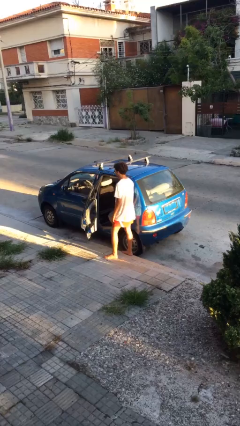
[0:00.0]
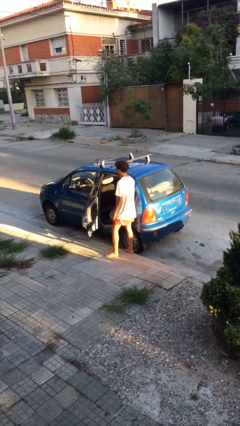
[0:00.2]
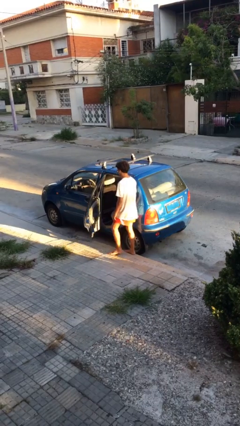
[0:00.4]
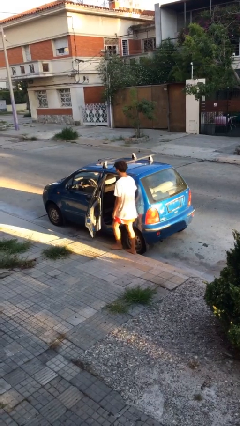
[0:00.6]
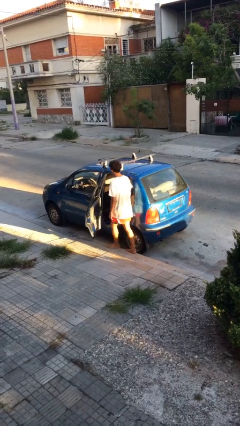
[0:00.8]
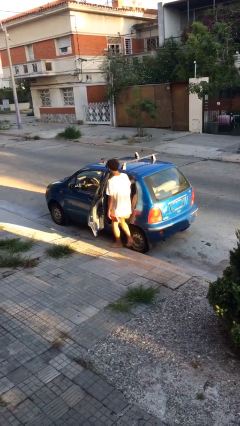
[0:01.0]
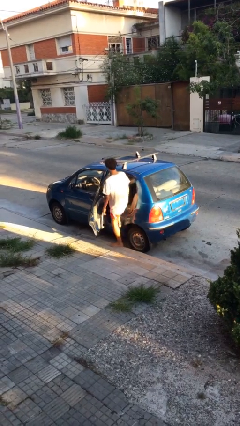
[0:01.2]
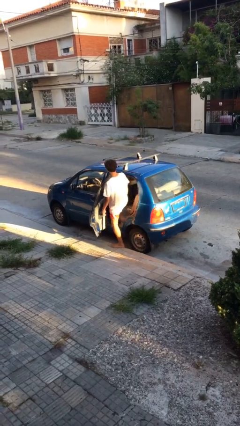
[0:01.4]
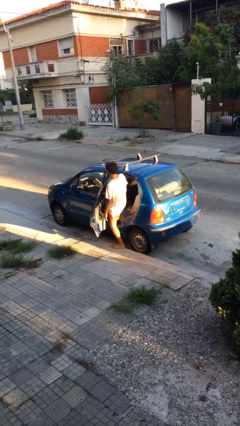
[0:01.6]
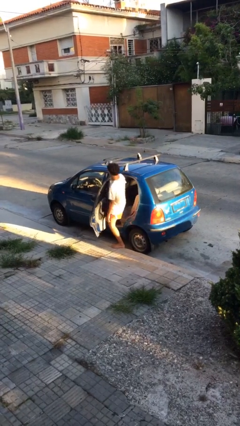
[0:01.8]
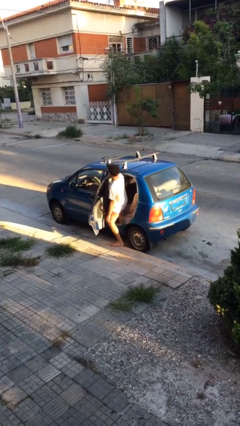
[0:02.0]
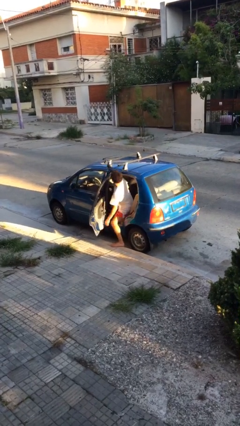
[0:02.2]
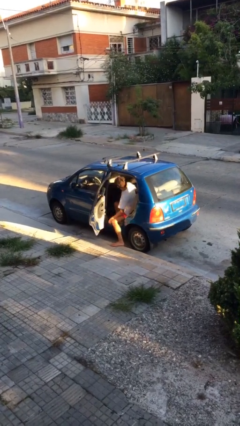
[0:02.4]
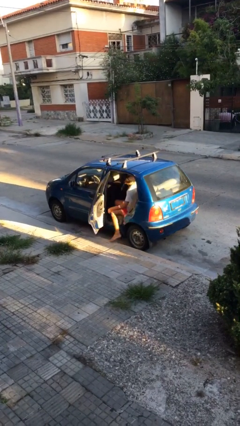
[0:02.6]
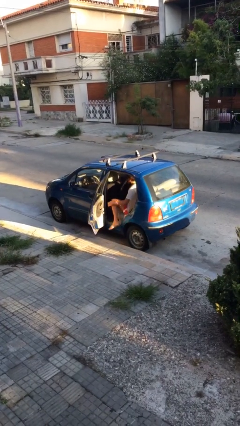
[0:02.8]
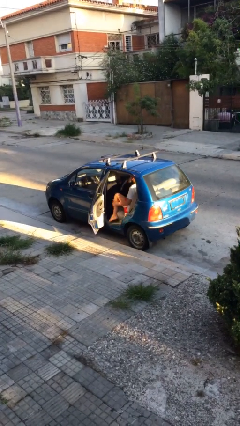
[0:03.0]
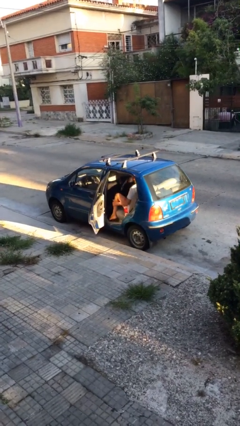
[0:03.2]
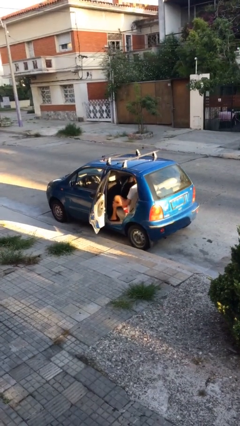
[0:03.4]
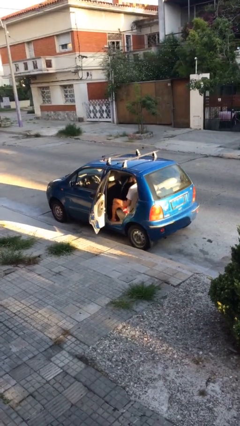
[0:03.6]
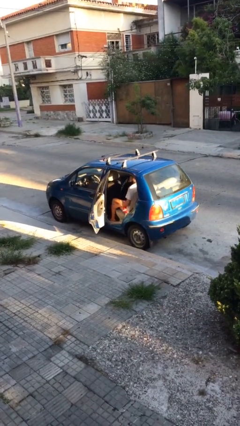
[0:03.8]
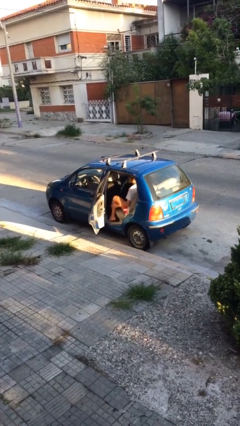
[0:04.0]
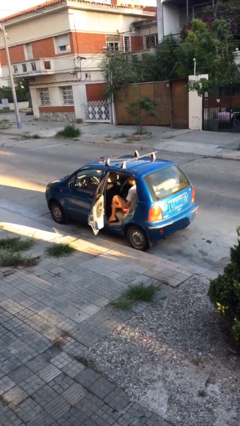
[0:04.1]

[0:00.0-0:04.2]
person enters car

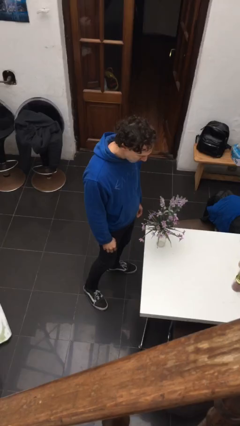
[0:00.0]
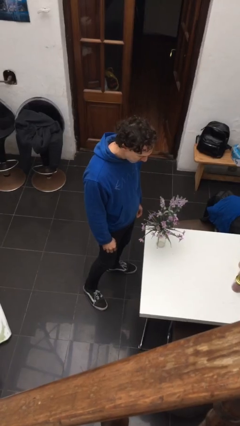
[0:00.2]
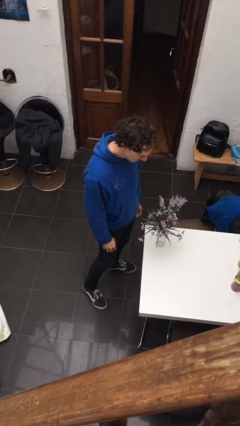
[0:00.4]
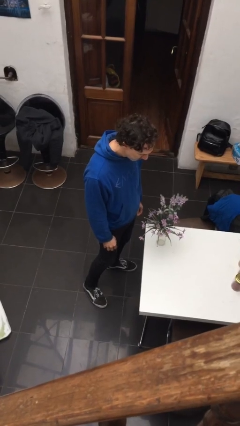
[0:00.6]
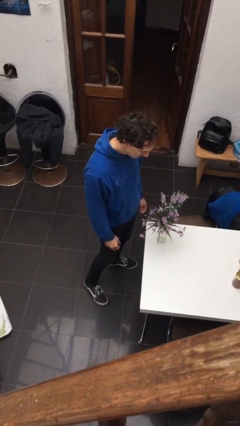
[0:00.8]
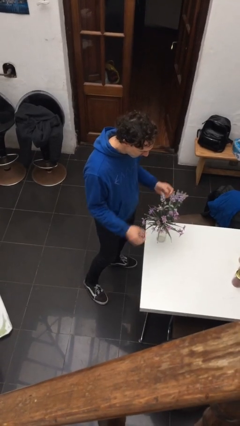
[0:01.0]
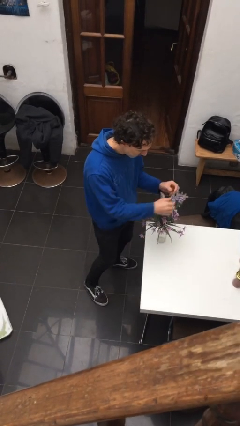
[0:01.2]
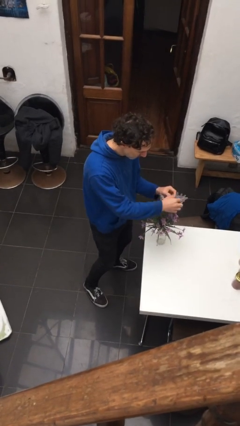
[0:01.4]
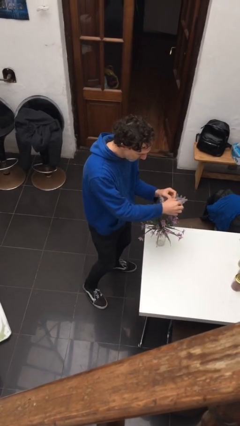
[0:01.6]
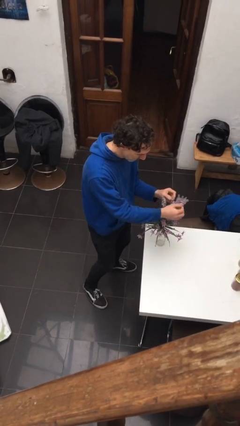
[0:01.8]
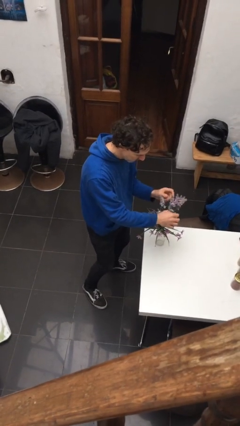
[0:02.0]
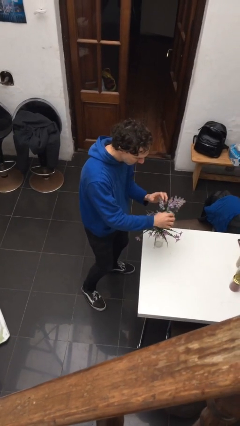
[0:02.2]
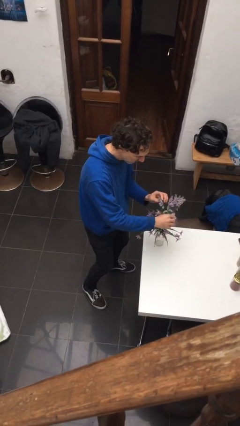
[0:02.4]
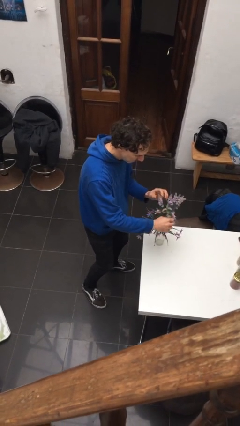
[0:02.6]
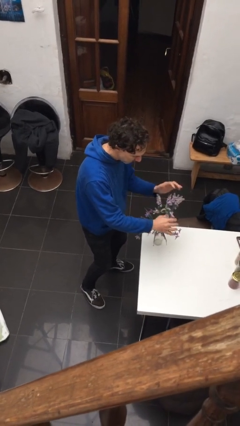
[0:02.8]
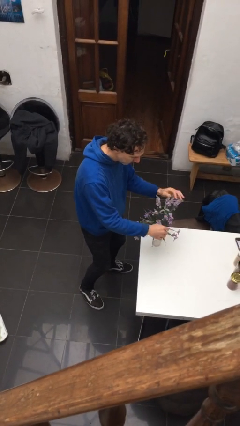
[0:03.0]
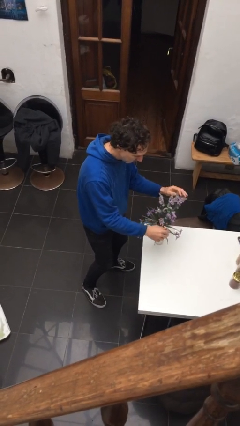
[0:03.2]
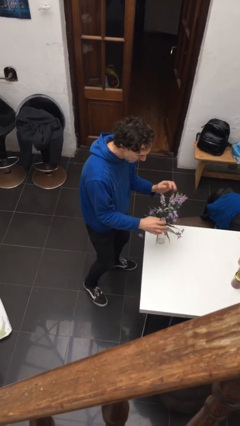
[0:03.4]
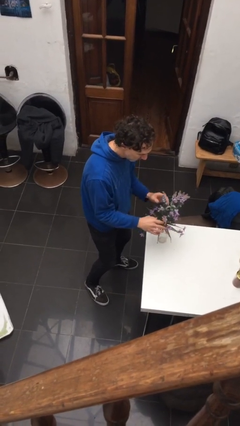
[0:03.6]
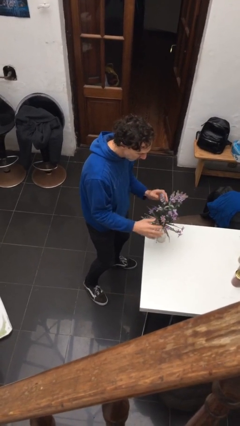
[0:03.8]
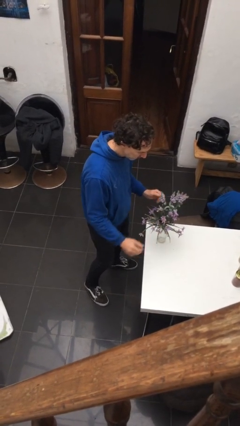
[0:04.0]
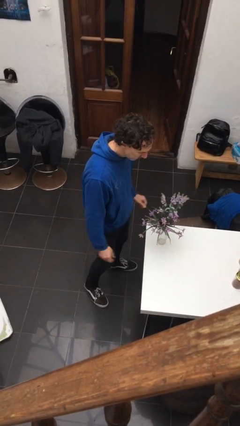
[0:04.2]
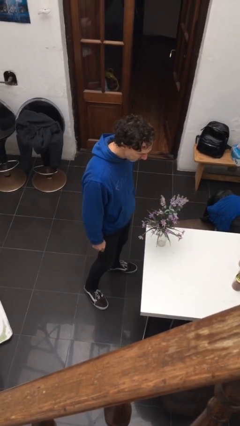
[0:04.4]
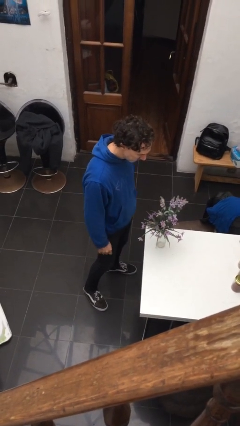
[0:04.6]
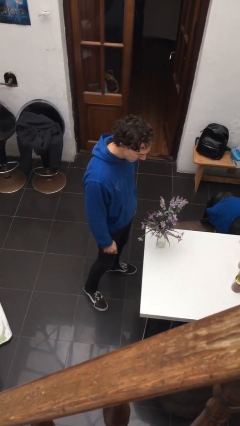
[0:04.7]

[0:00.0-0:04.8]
person arranges flowers in vase

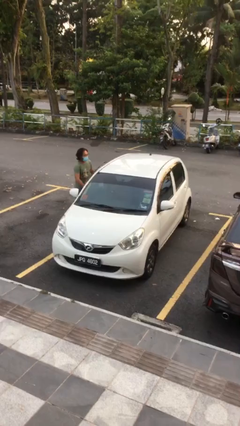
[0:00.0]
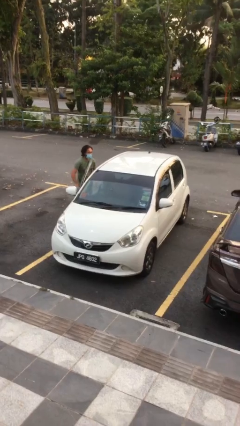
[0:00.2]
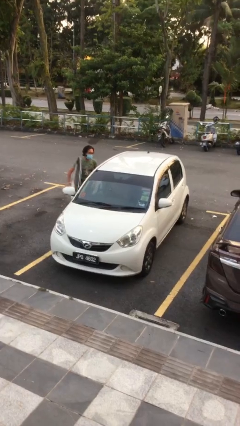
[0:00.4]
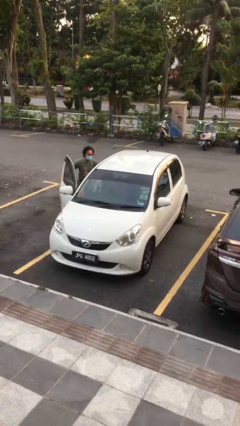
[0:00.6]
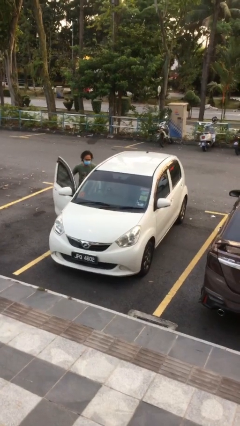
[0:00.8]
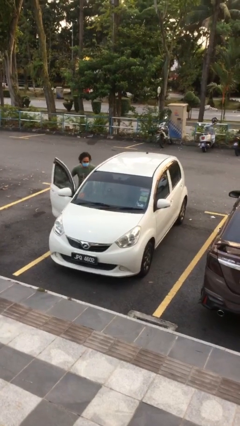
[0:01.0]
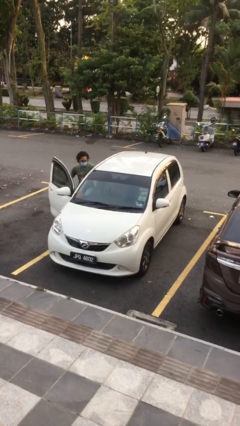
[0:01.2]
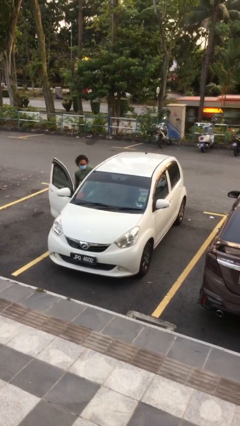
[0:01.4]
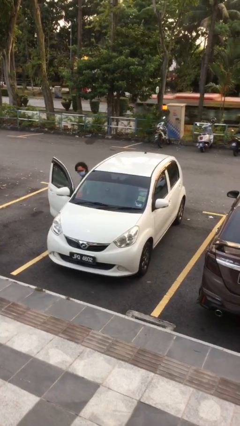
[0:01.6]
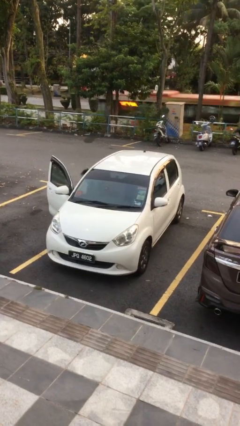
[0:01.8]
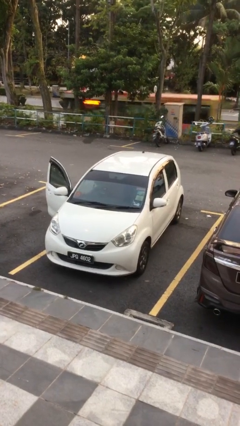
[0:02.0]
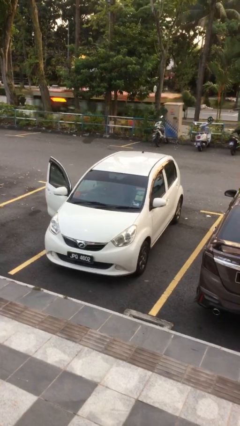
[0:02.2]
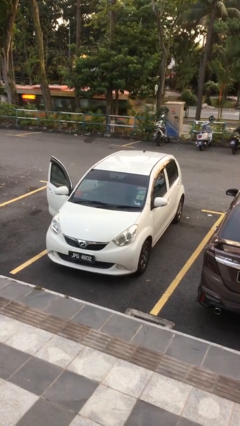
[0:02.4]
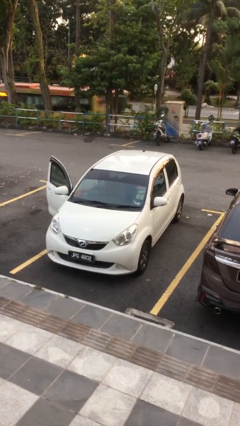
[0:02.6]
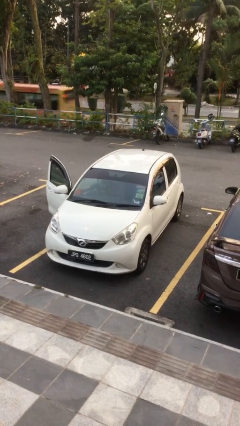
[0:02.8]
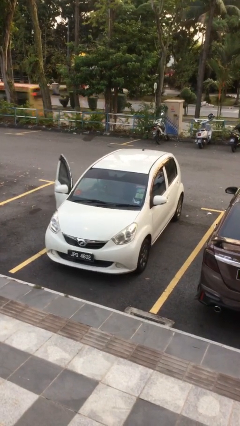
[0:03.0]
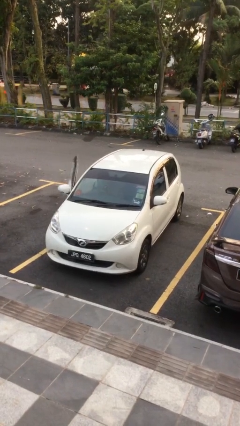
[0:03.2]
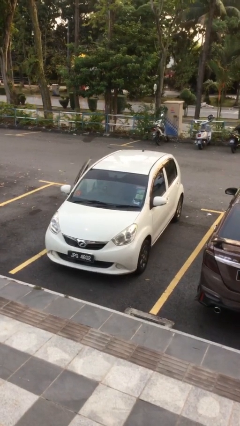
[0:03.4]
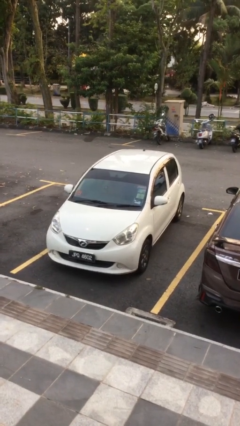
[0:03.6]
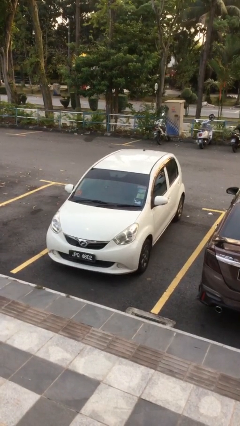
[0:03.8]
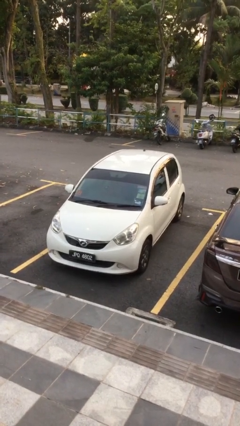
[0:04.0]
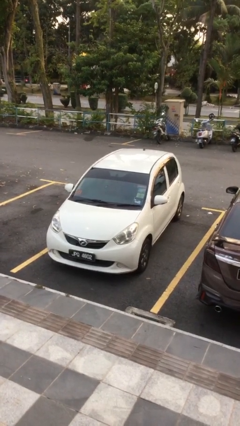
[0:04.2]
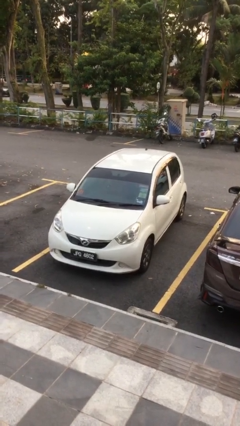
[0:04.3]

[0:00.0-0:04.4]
car picks up person

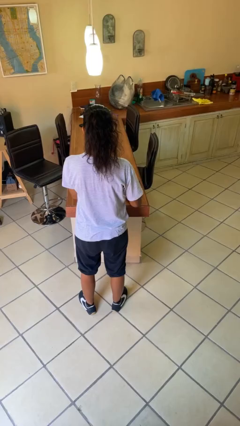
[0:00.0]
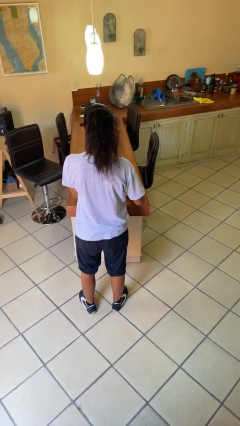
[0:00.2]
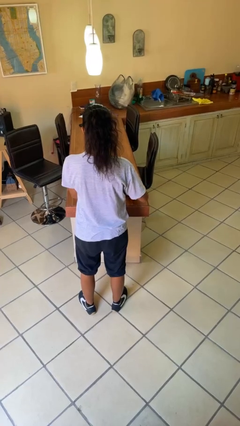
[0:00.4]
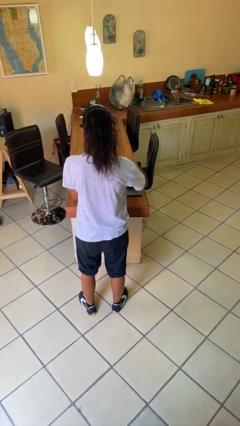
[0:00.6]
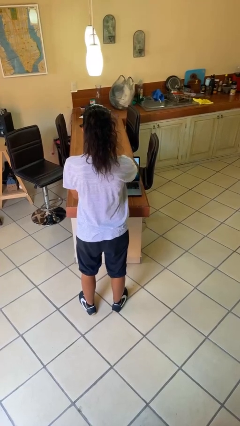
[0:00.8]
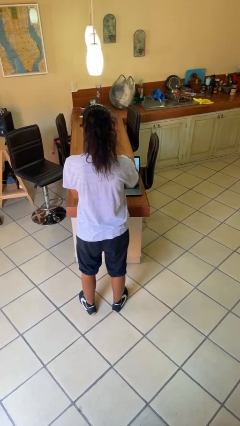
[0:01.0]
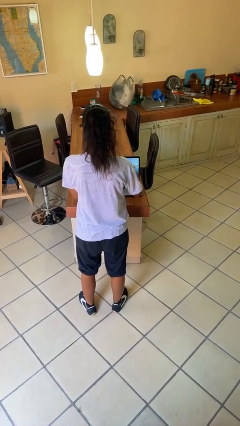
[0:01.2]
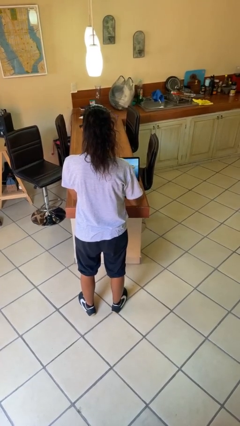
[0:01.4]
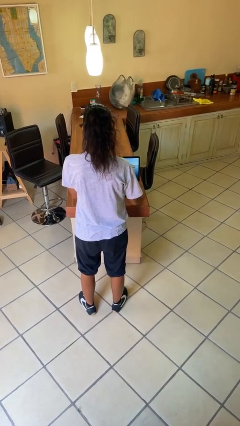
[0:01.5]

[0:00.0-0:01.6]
person opens laptop

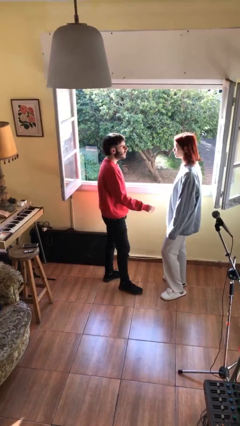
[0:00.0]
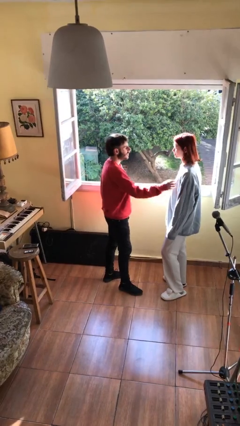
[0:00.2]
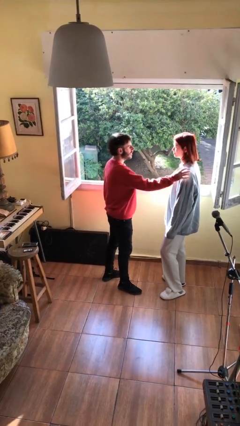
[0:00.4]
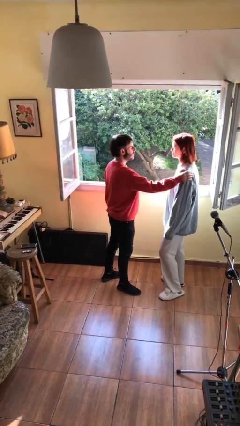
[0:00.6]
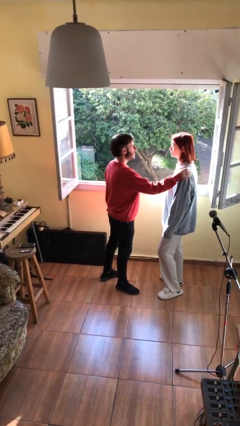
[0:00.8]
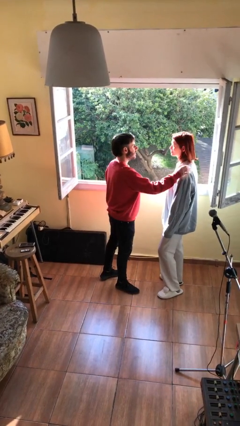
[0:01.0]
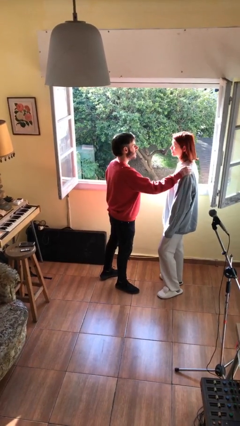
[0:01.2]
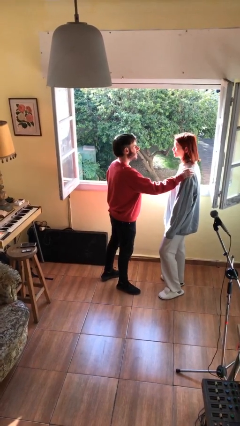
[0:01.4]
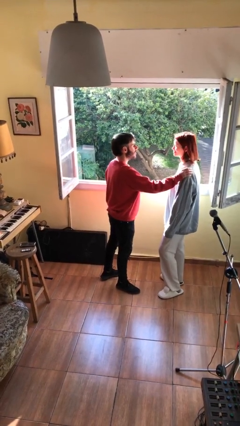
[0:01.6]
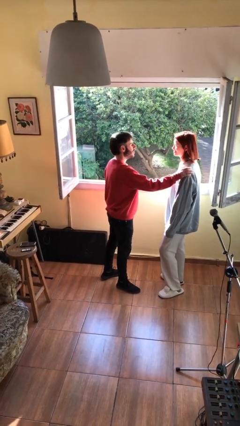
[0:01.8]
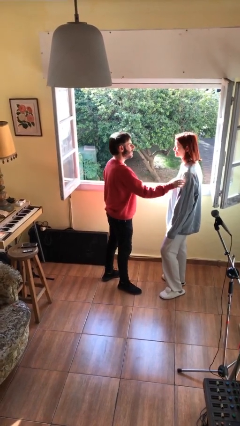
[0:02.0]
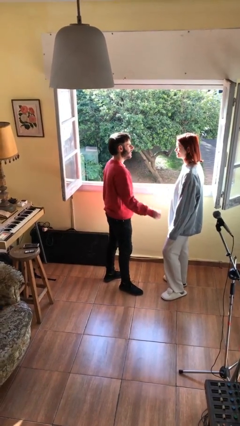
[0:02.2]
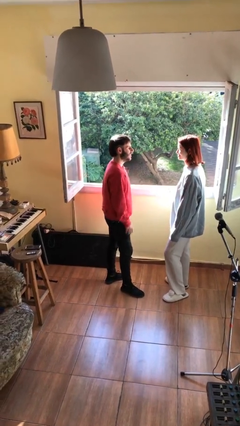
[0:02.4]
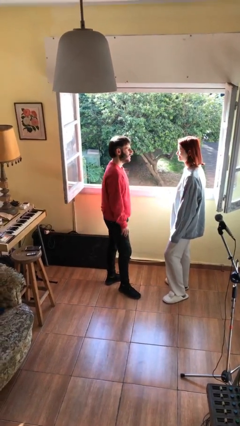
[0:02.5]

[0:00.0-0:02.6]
person pounds shoulders of person
